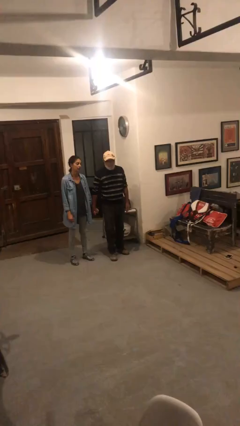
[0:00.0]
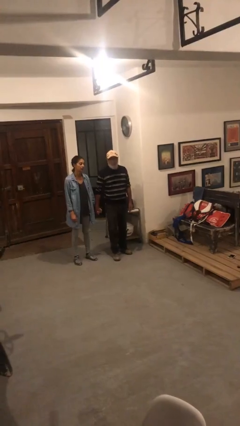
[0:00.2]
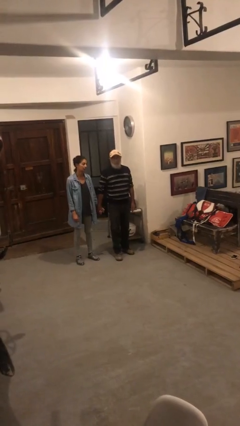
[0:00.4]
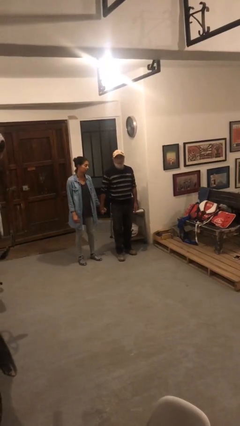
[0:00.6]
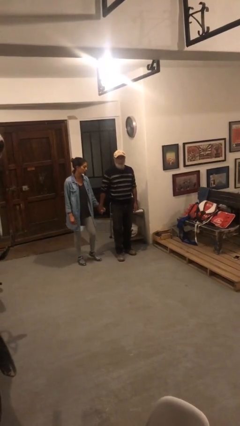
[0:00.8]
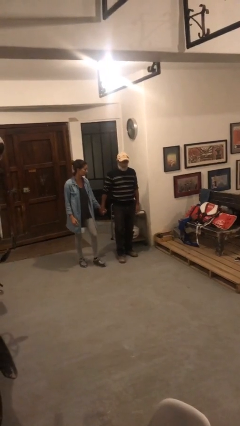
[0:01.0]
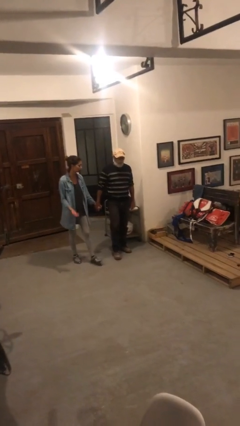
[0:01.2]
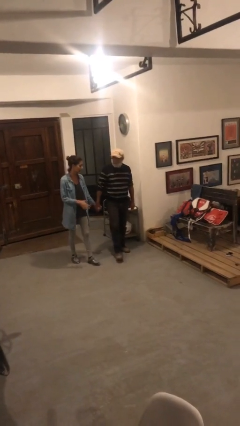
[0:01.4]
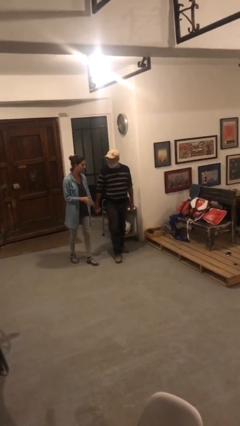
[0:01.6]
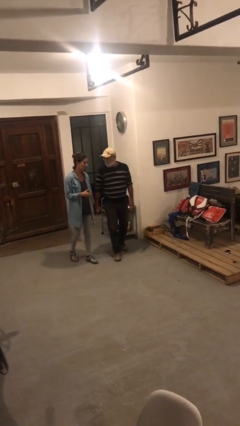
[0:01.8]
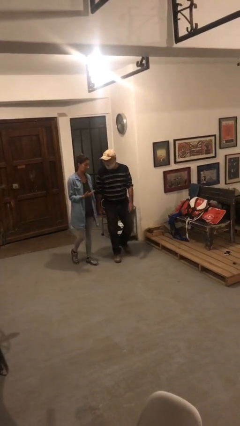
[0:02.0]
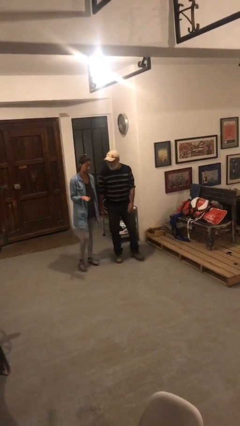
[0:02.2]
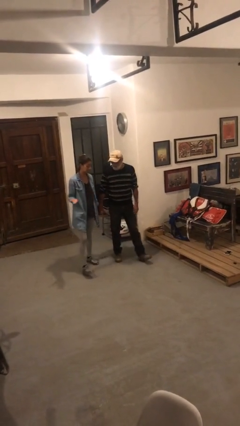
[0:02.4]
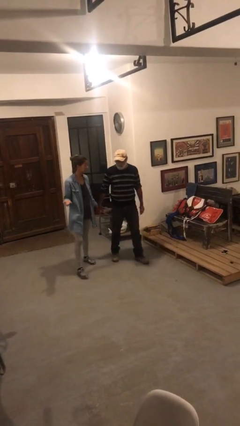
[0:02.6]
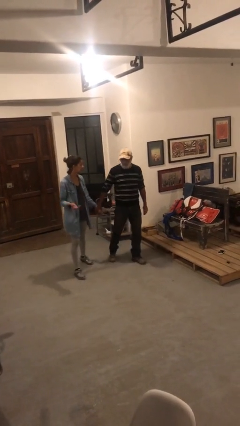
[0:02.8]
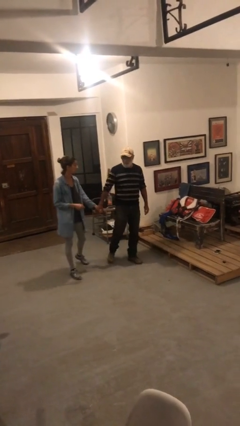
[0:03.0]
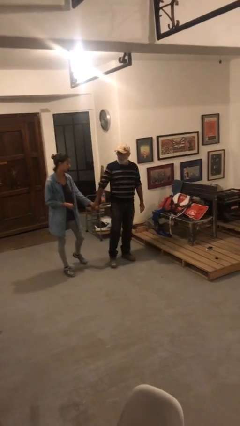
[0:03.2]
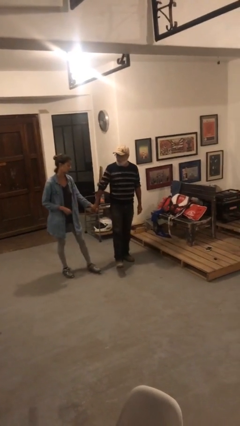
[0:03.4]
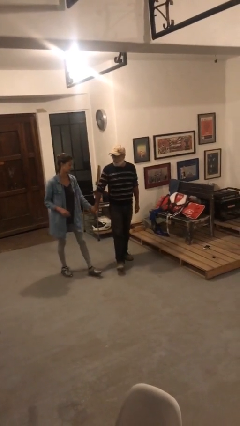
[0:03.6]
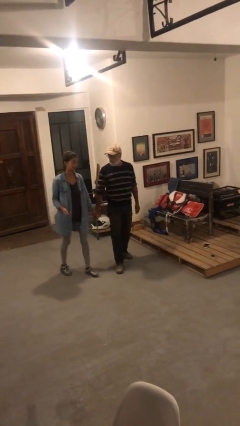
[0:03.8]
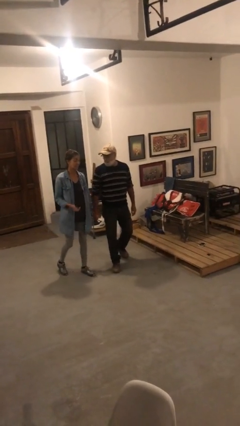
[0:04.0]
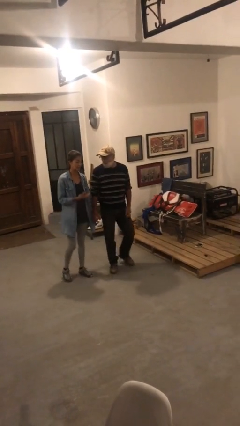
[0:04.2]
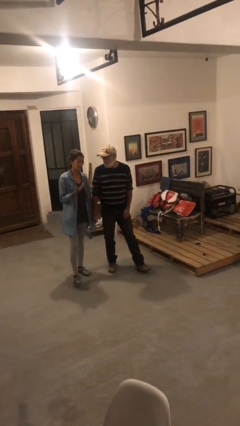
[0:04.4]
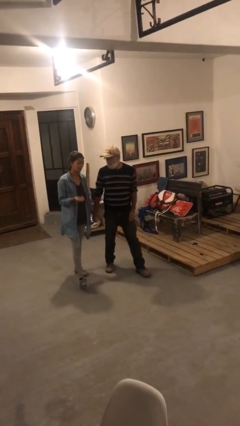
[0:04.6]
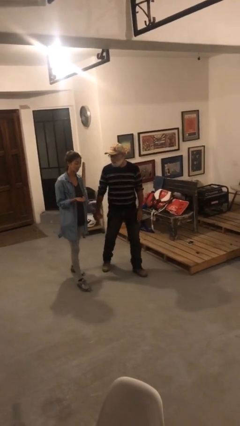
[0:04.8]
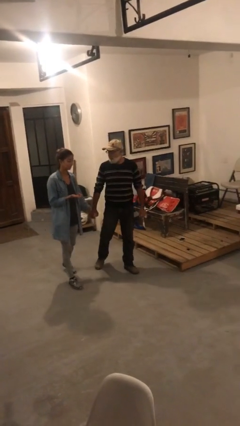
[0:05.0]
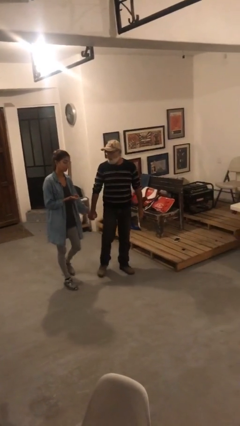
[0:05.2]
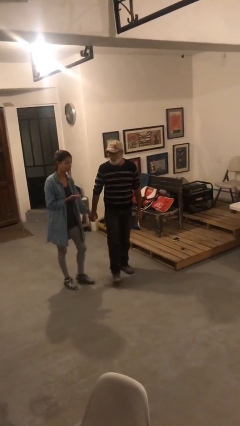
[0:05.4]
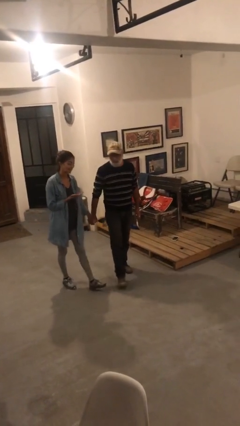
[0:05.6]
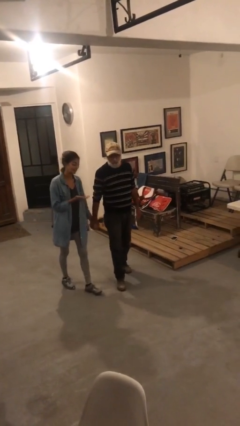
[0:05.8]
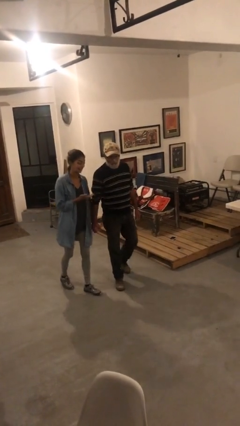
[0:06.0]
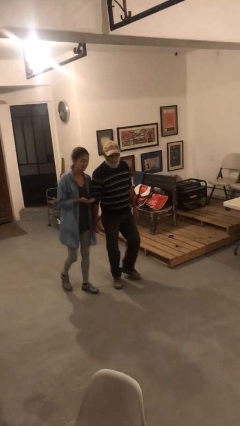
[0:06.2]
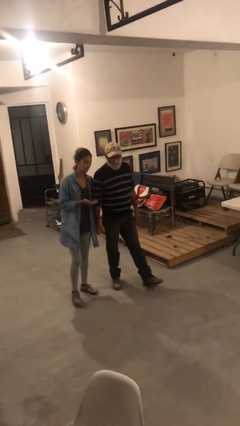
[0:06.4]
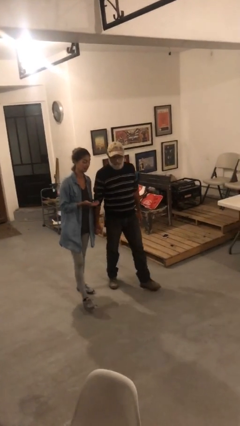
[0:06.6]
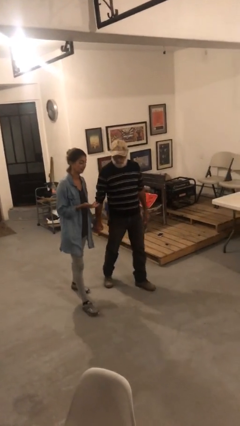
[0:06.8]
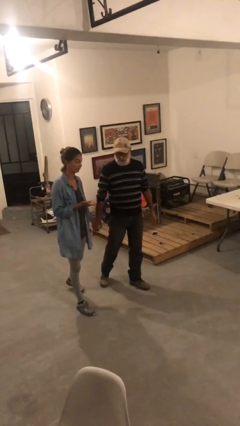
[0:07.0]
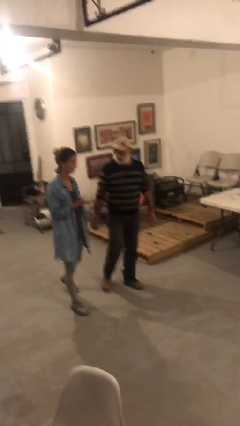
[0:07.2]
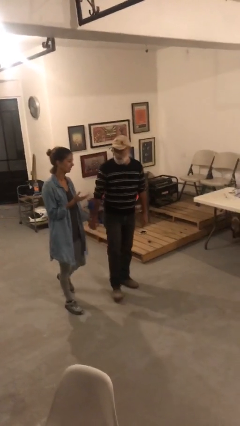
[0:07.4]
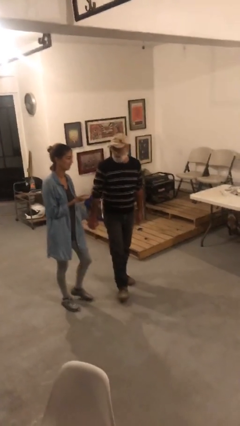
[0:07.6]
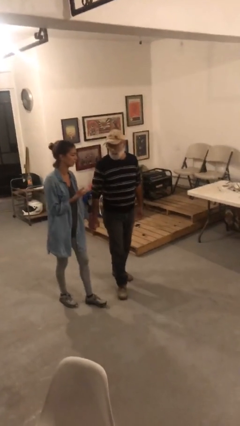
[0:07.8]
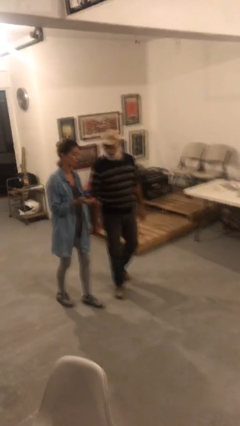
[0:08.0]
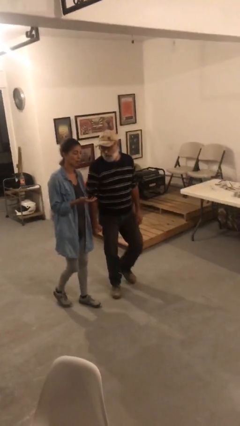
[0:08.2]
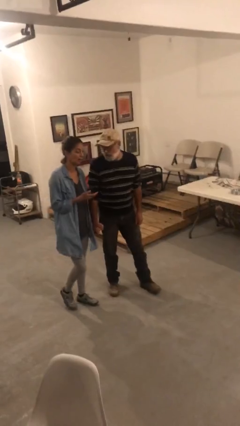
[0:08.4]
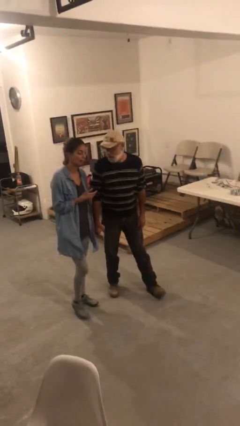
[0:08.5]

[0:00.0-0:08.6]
person holds hand

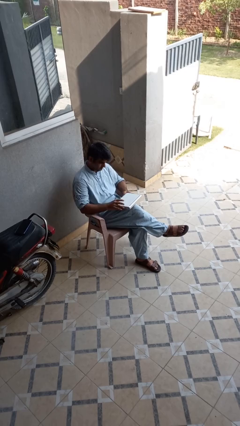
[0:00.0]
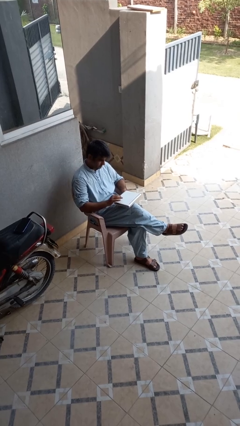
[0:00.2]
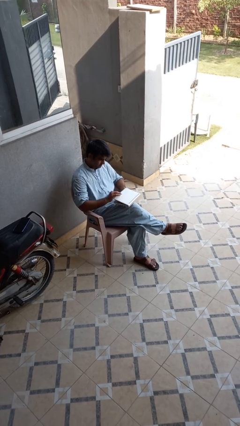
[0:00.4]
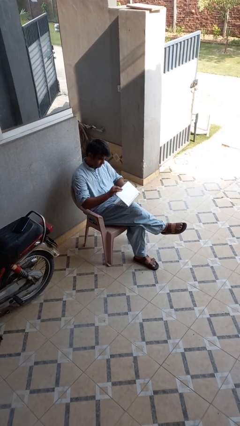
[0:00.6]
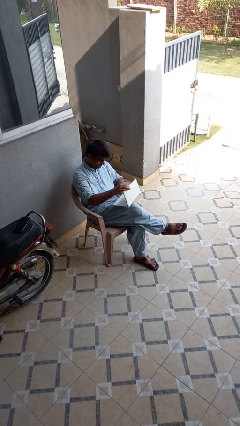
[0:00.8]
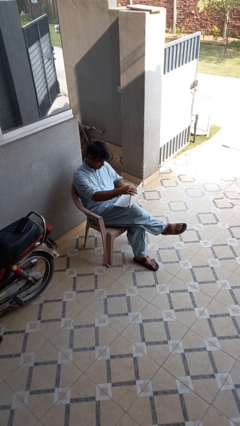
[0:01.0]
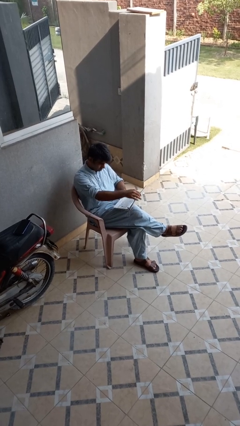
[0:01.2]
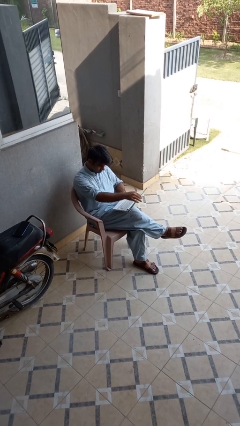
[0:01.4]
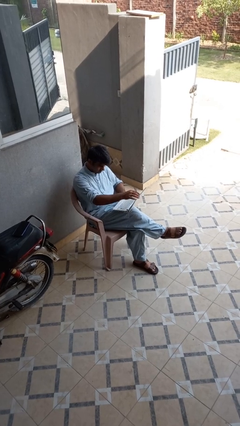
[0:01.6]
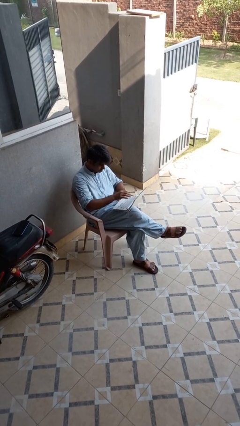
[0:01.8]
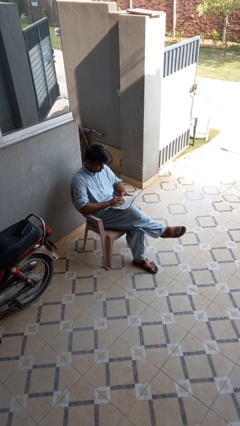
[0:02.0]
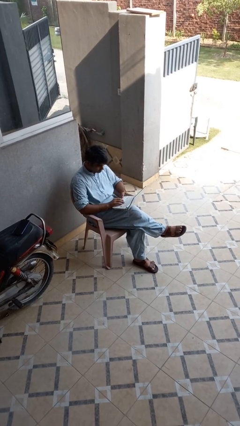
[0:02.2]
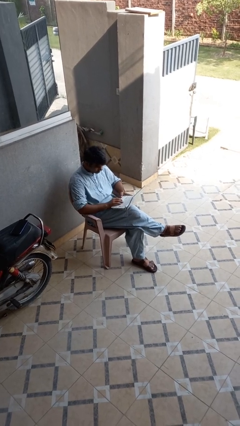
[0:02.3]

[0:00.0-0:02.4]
person opens laptop

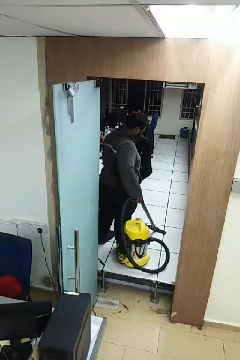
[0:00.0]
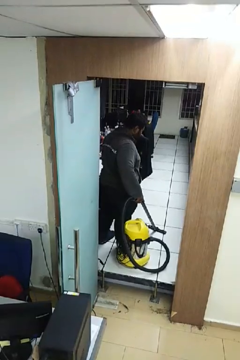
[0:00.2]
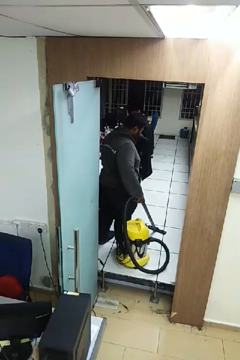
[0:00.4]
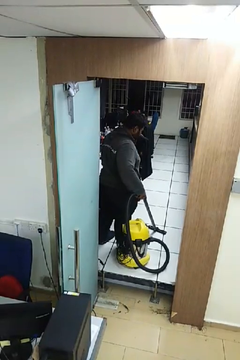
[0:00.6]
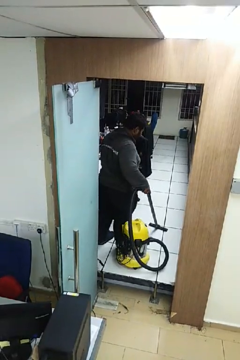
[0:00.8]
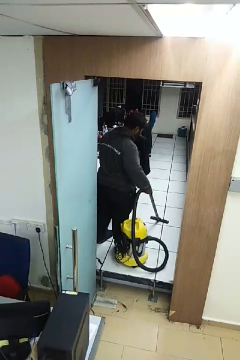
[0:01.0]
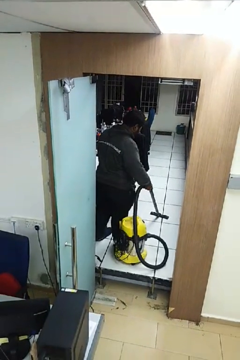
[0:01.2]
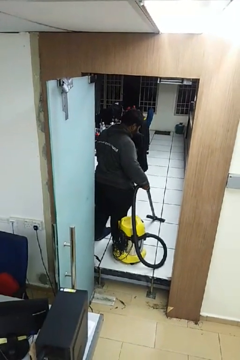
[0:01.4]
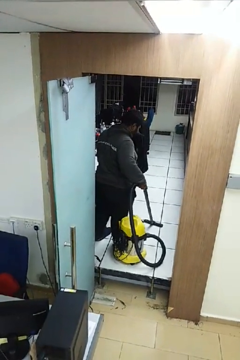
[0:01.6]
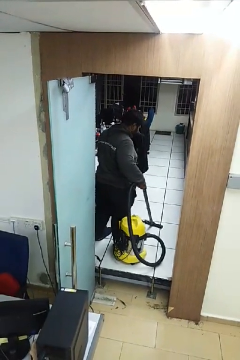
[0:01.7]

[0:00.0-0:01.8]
person vacuums carpet

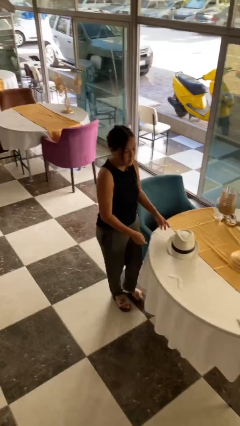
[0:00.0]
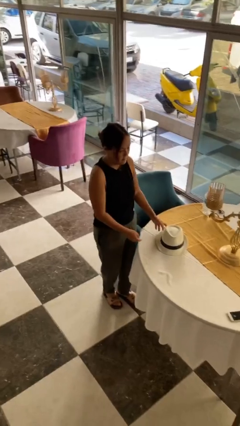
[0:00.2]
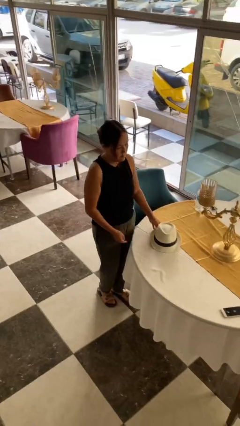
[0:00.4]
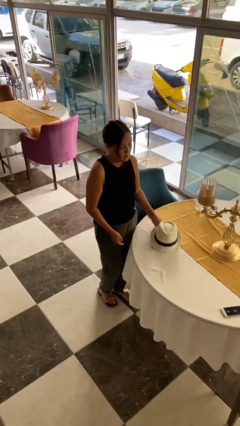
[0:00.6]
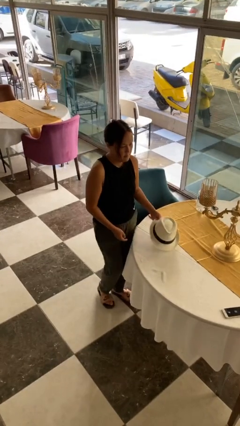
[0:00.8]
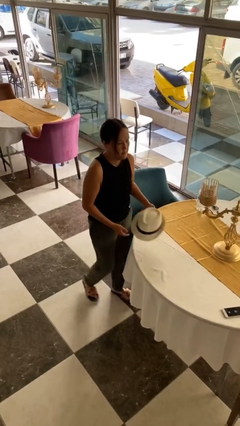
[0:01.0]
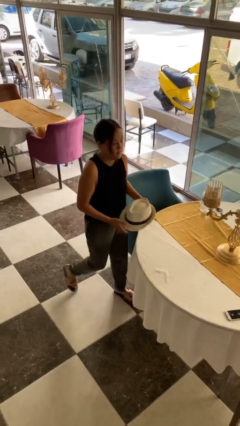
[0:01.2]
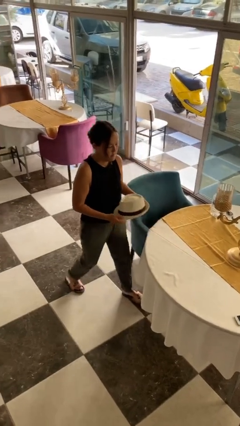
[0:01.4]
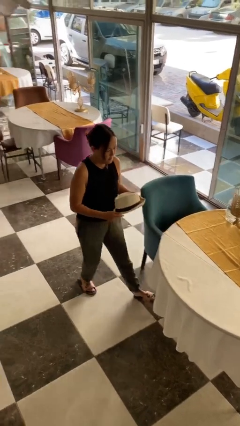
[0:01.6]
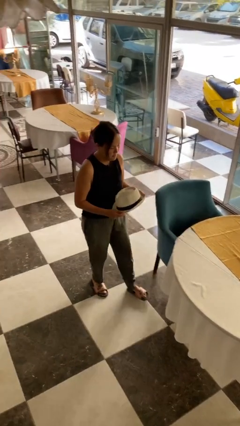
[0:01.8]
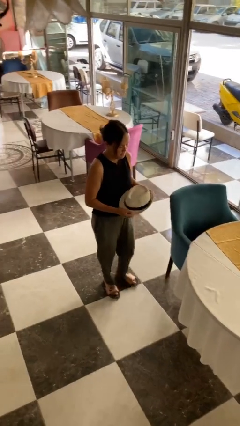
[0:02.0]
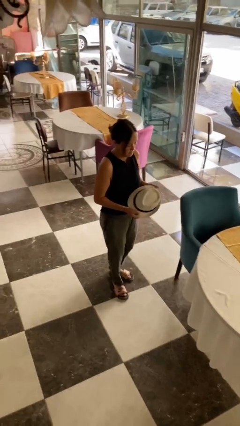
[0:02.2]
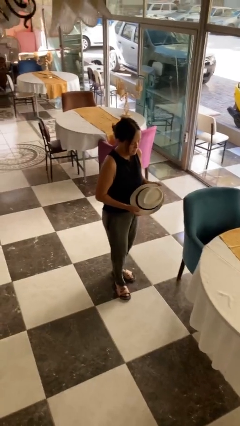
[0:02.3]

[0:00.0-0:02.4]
person picks up object from table

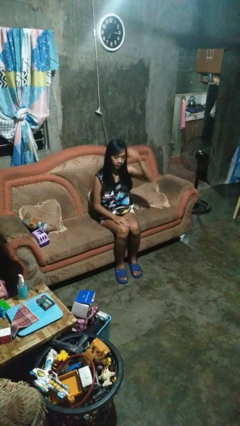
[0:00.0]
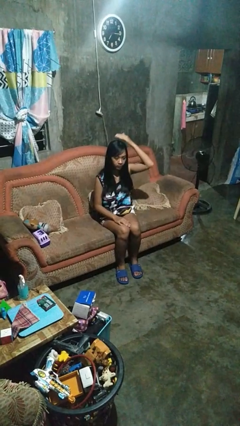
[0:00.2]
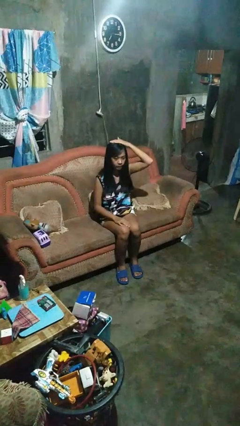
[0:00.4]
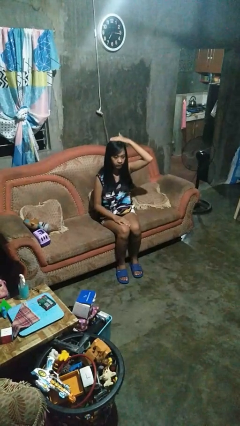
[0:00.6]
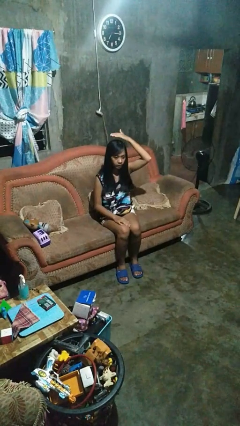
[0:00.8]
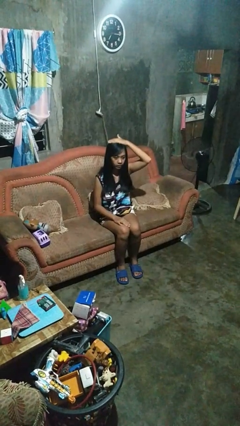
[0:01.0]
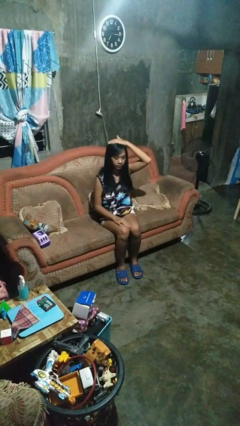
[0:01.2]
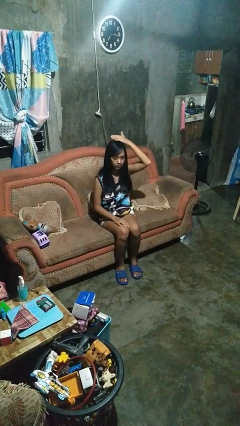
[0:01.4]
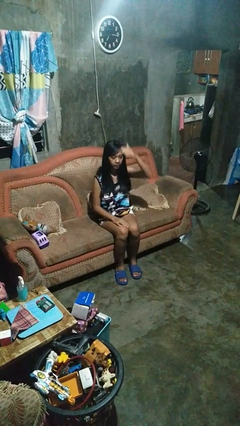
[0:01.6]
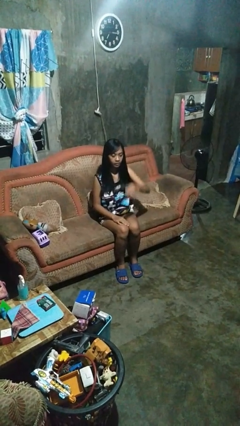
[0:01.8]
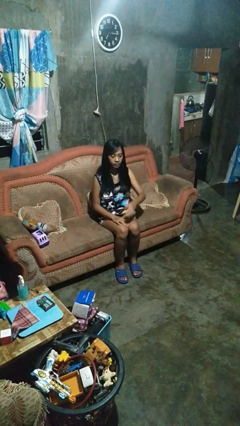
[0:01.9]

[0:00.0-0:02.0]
person pats head

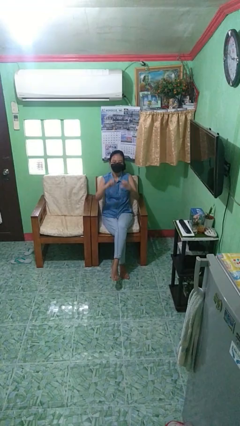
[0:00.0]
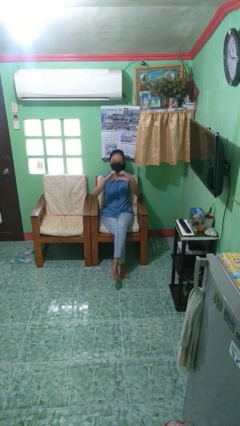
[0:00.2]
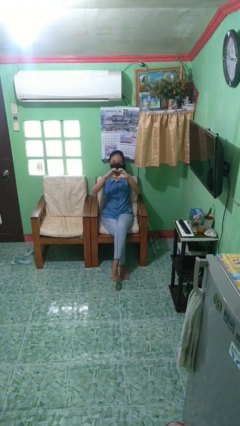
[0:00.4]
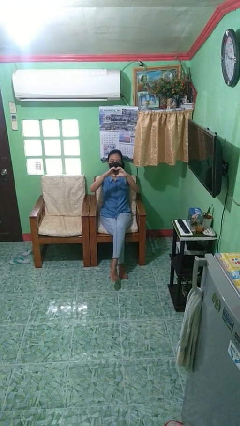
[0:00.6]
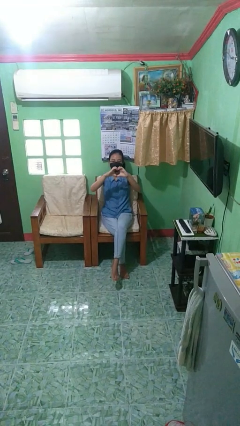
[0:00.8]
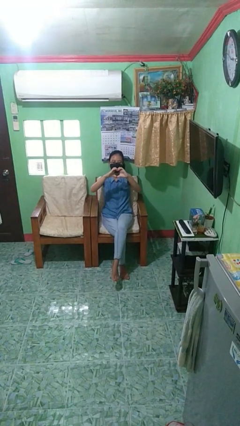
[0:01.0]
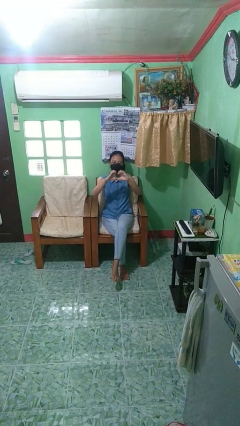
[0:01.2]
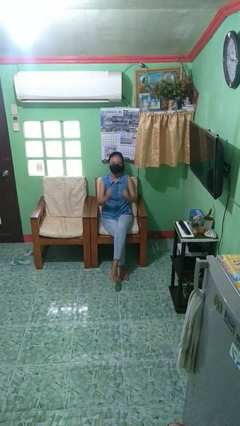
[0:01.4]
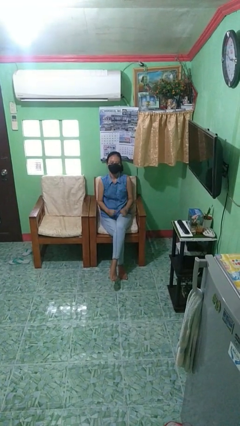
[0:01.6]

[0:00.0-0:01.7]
person gestures heart
